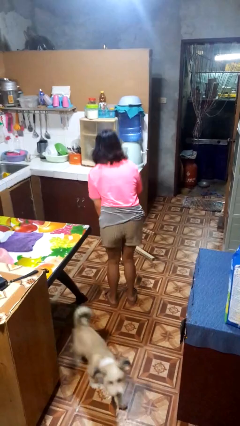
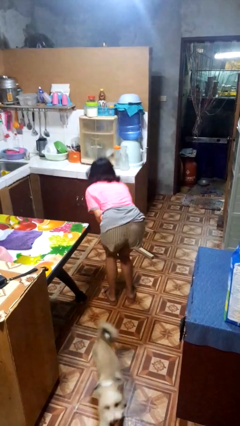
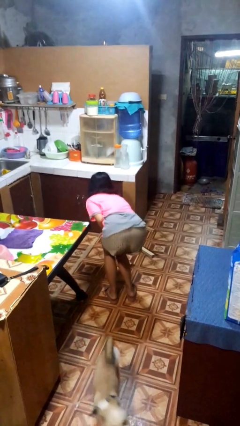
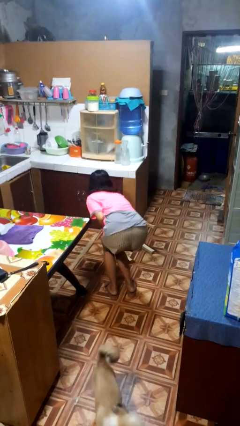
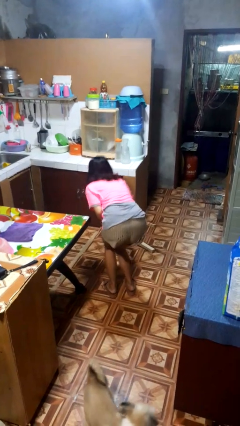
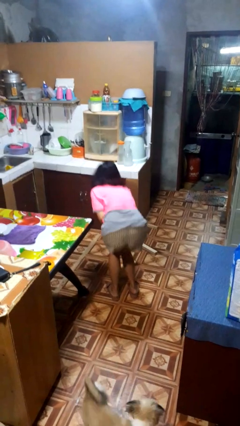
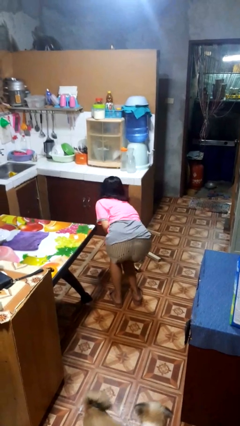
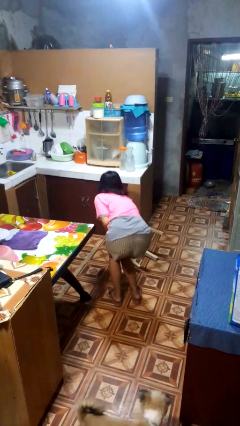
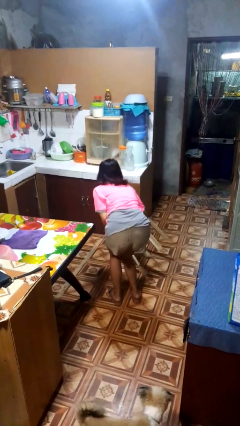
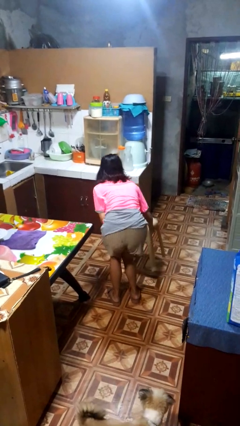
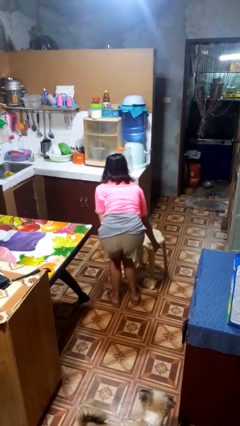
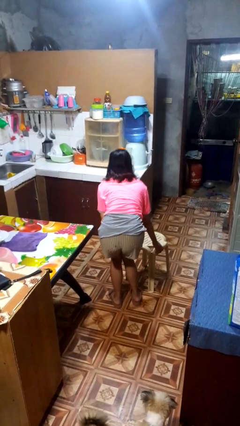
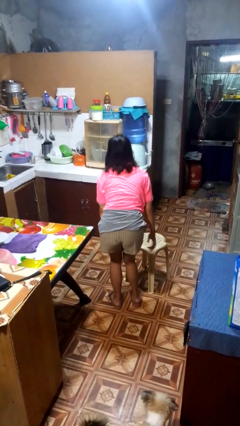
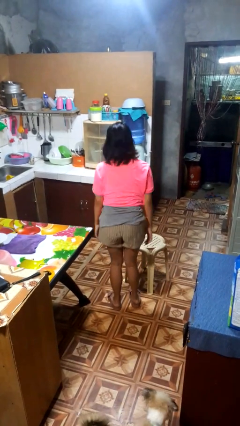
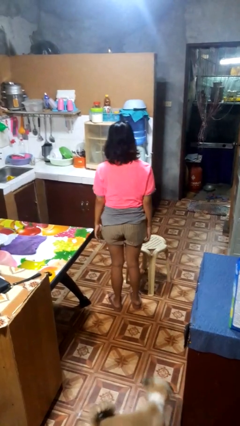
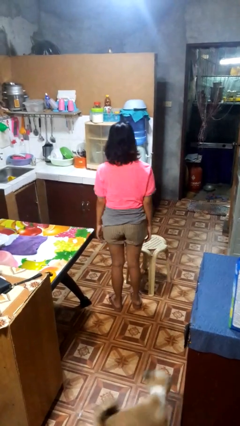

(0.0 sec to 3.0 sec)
person sets upright furniture

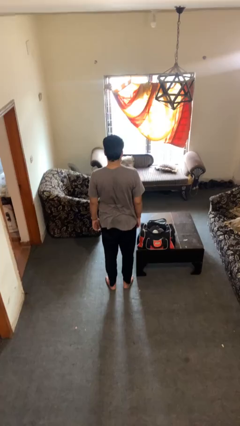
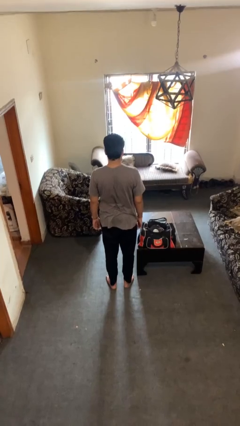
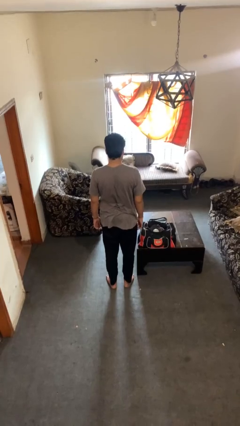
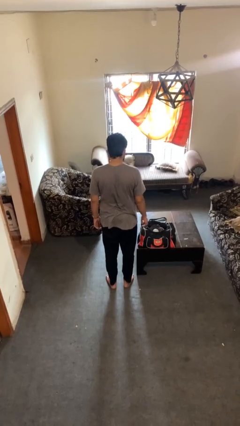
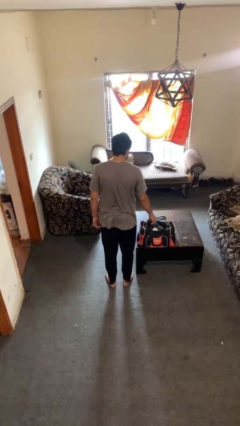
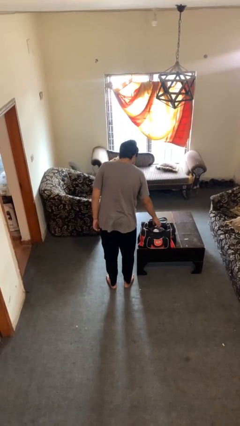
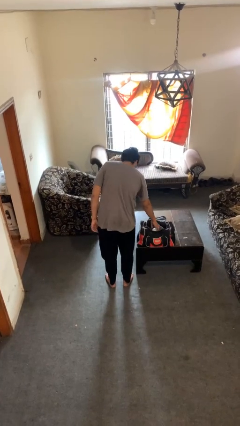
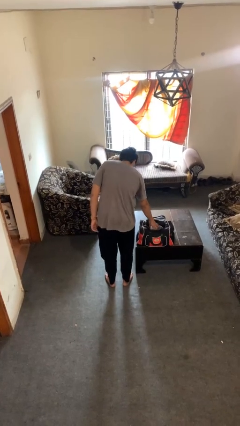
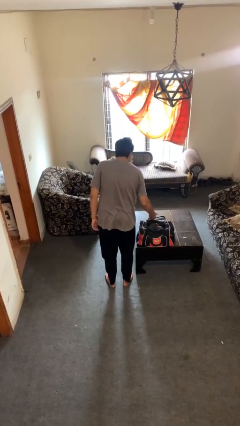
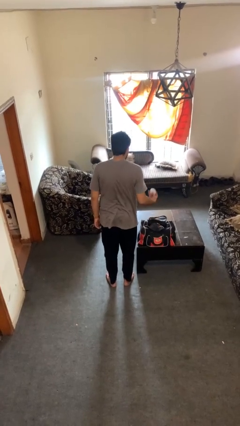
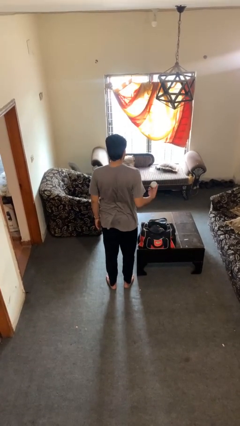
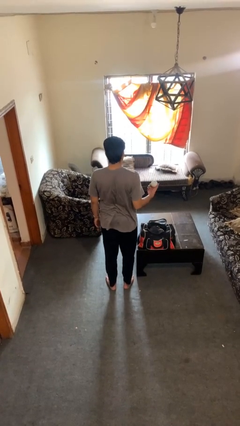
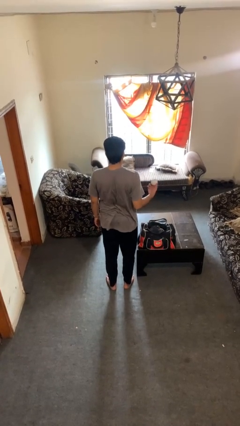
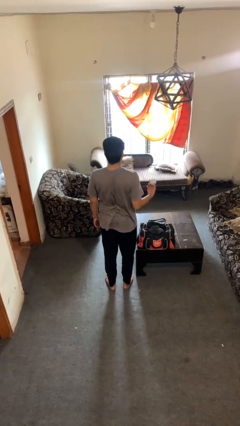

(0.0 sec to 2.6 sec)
person takes object from bag

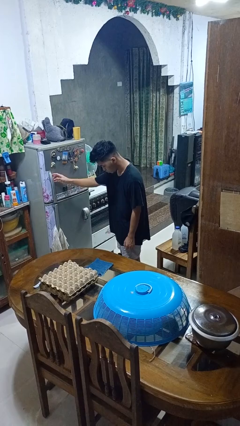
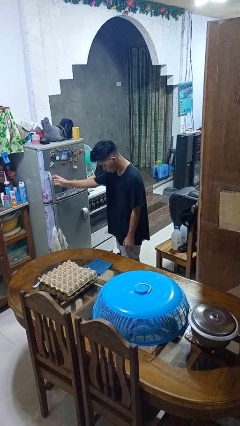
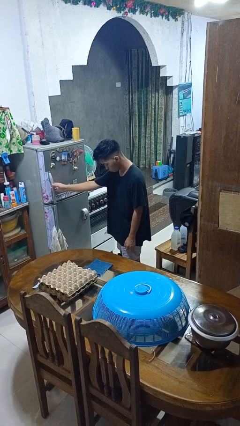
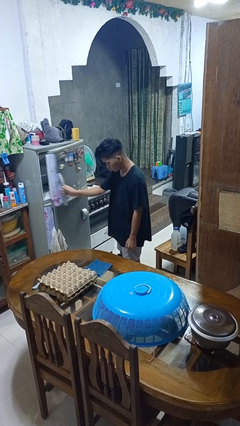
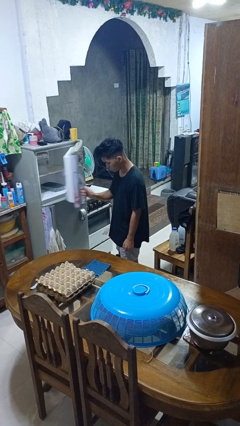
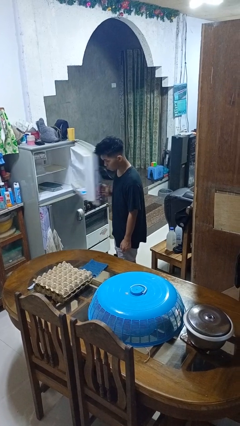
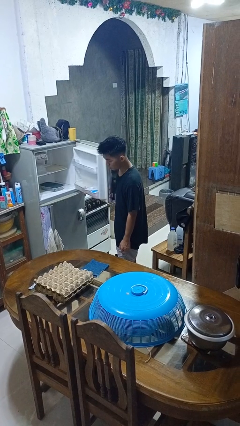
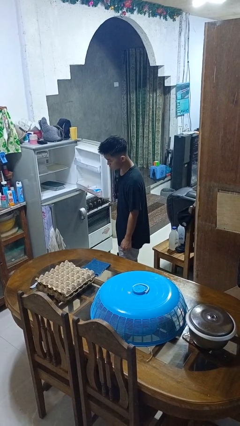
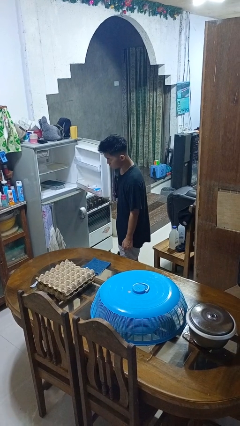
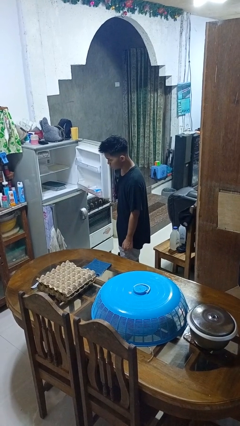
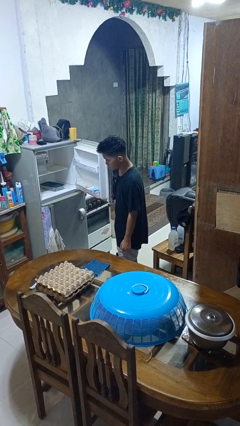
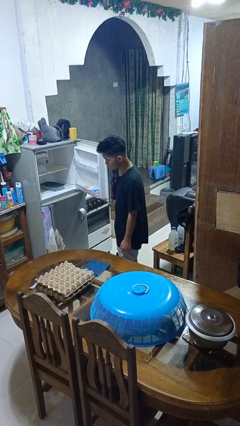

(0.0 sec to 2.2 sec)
person opens refrigerator

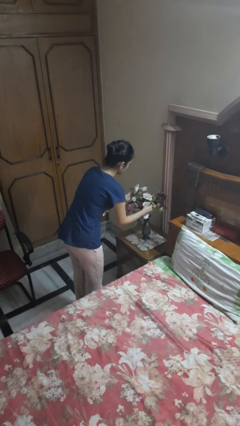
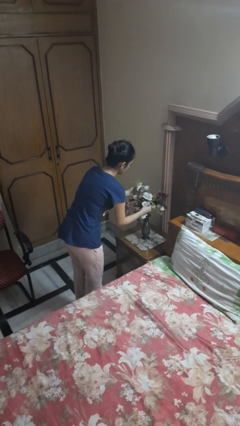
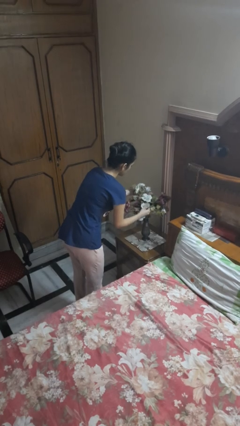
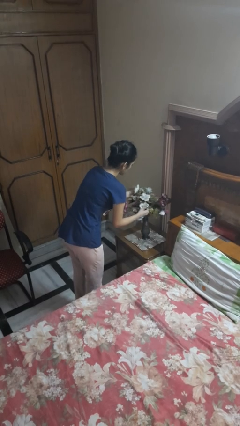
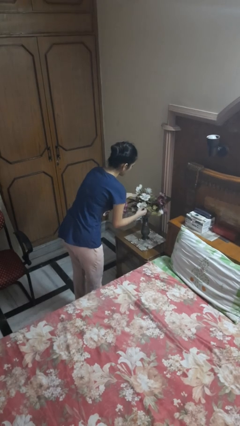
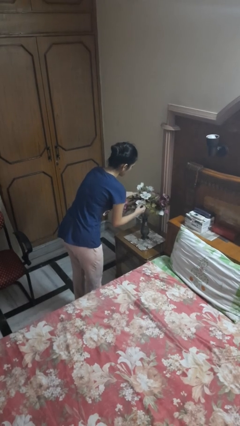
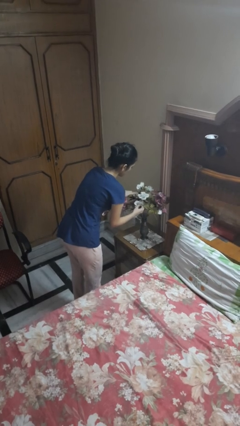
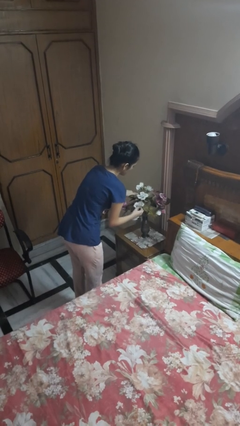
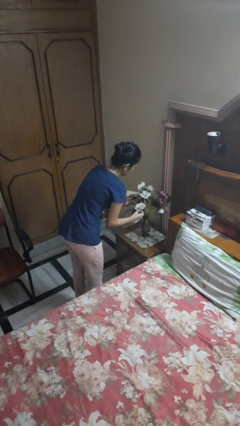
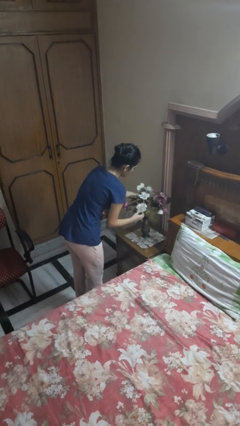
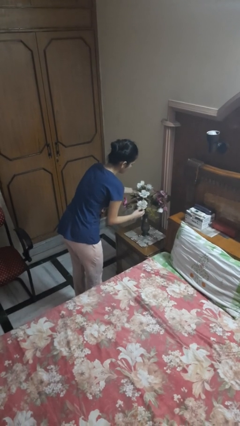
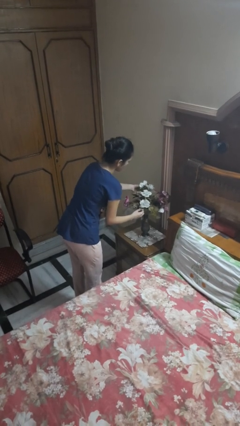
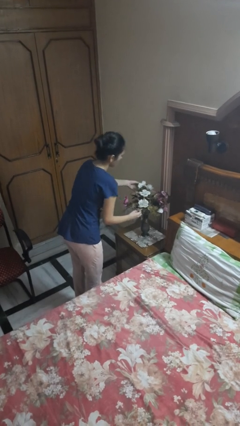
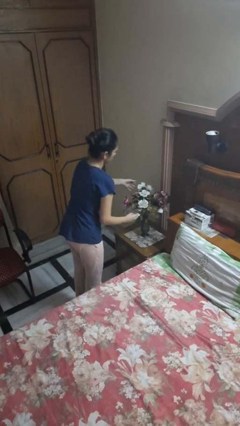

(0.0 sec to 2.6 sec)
person arranges flowers in vase

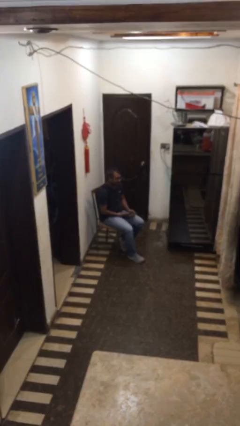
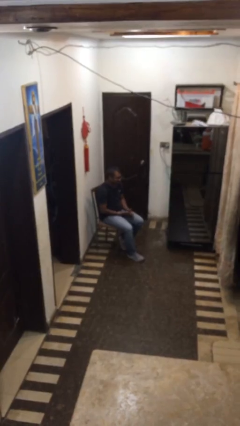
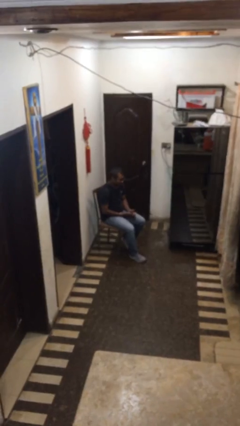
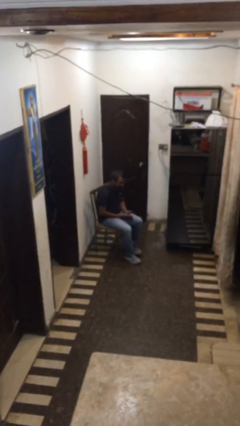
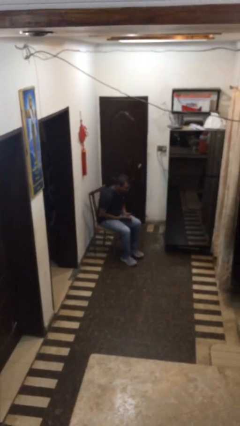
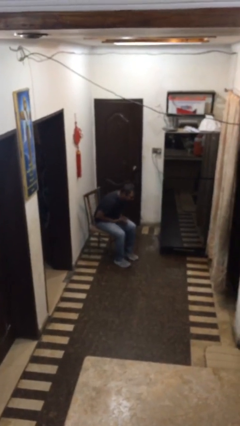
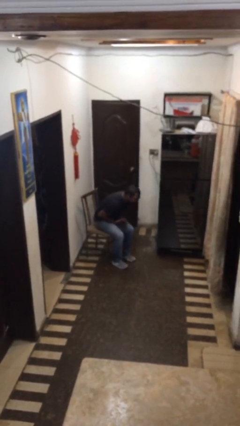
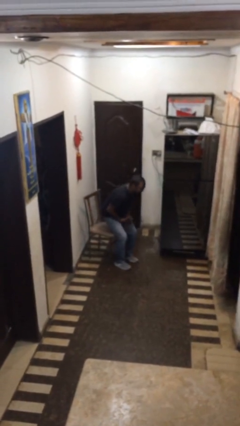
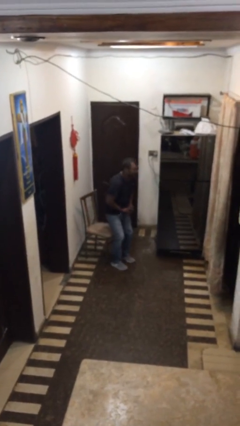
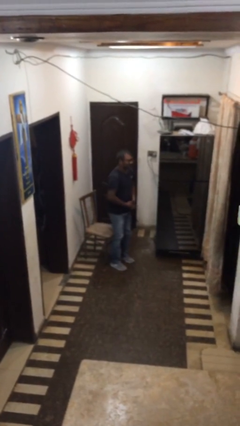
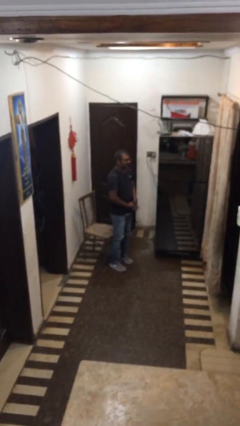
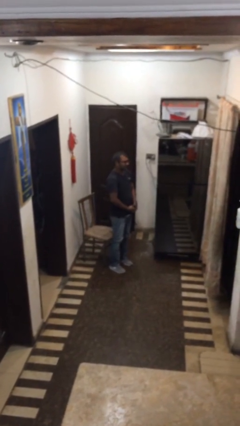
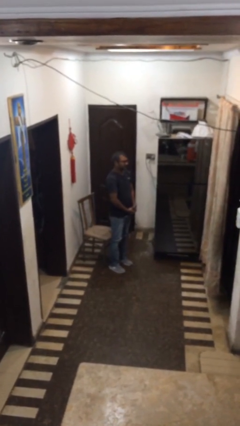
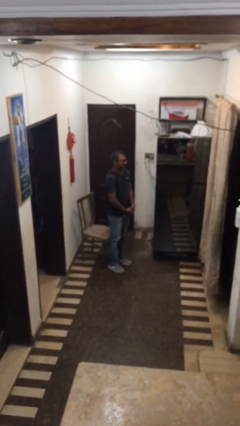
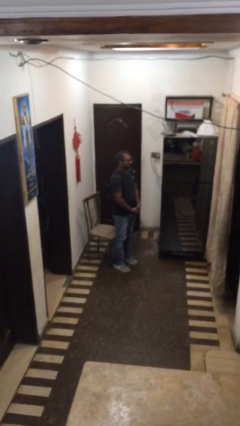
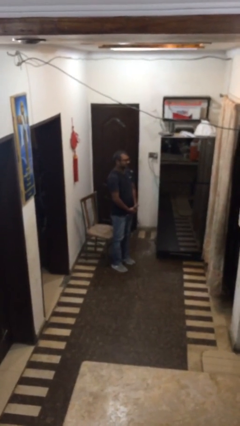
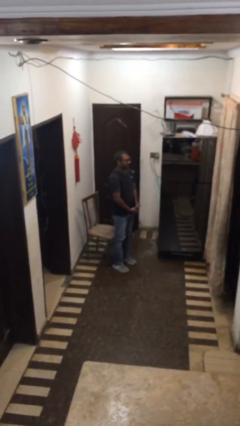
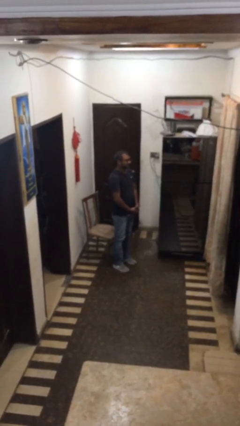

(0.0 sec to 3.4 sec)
person stands up

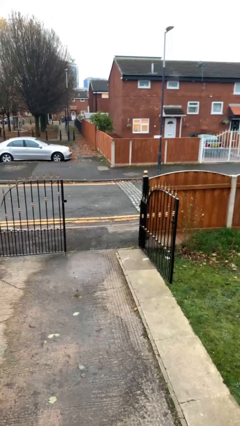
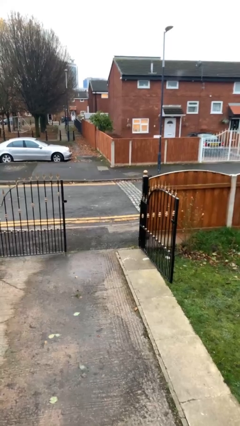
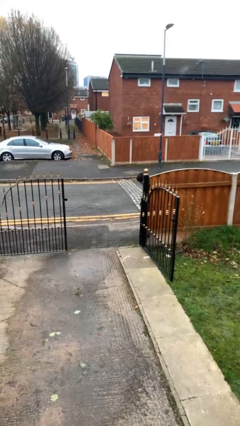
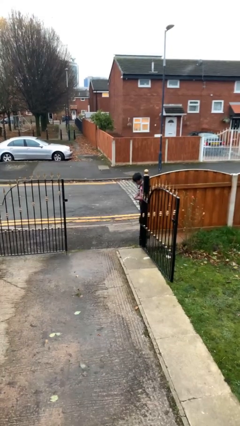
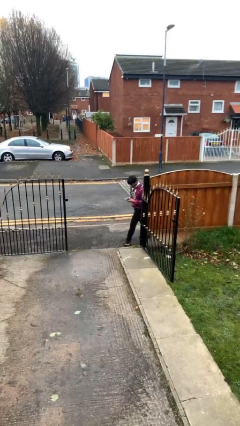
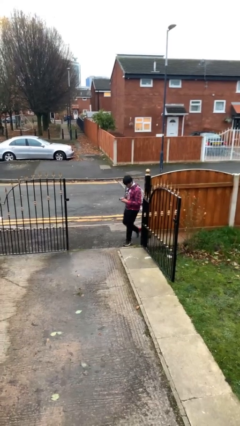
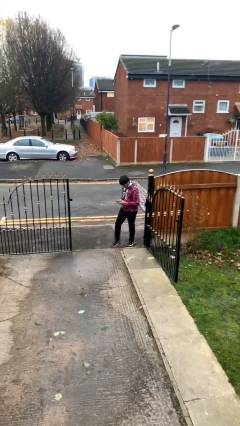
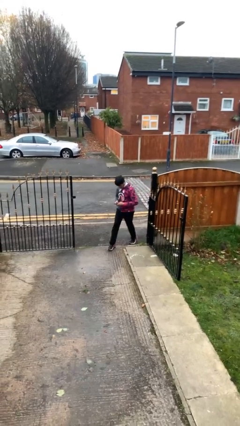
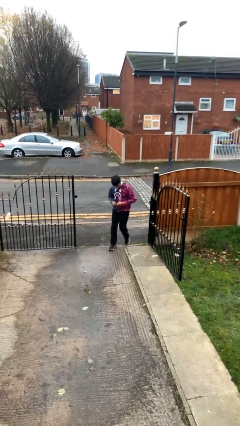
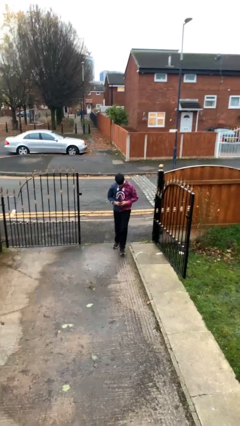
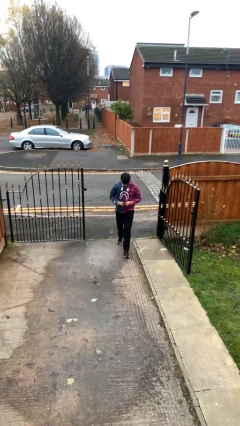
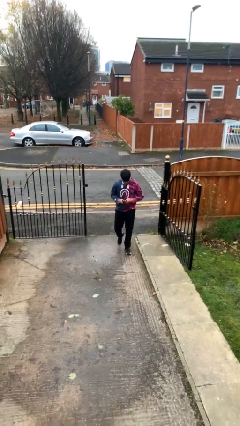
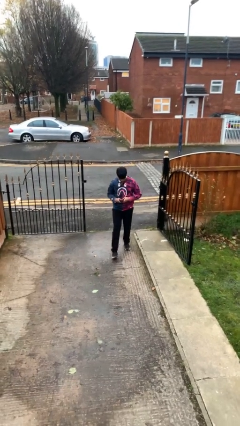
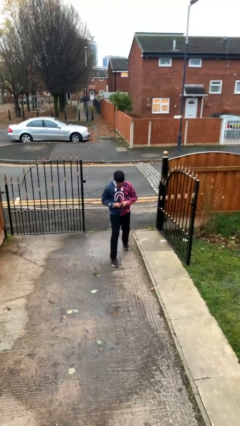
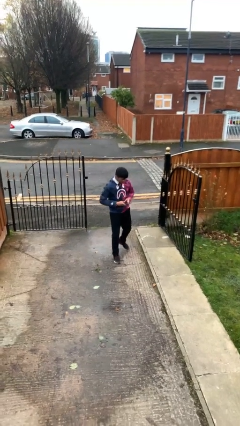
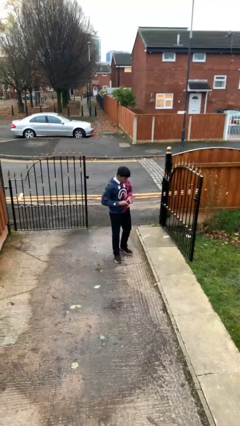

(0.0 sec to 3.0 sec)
person enters scene through structure

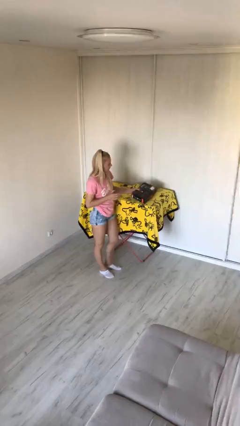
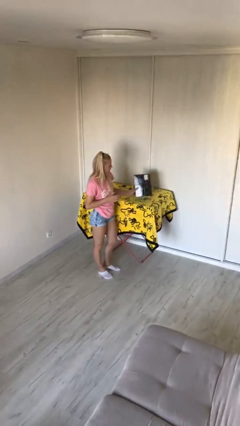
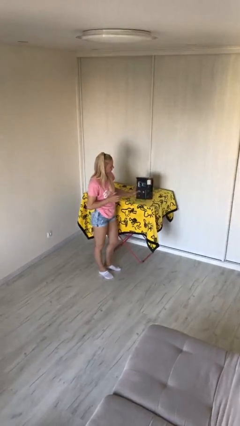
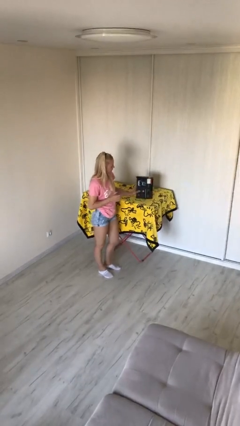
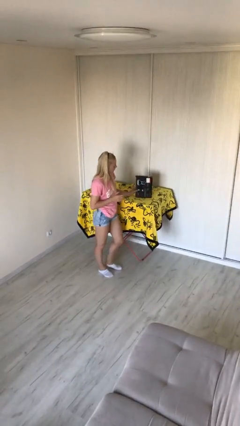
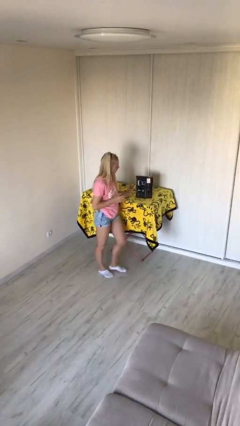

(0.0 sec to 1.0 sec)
person puts down object on table
